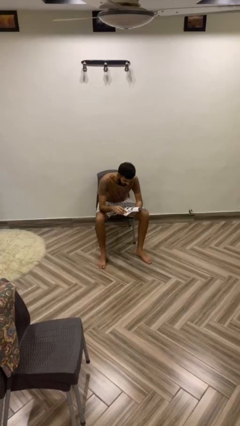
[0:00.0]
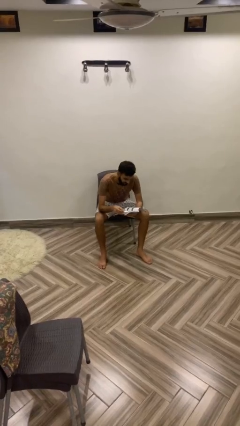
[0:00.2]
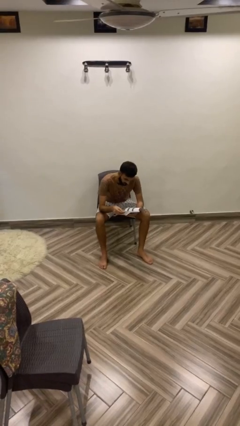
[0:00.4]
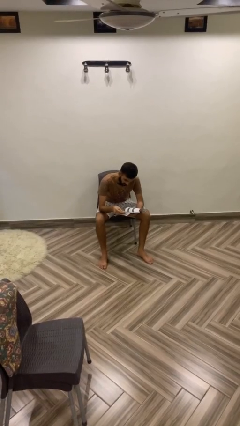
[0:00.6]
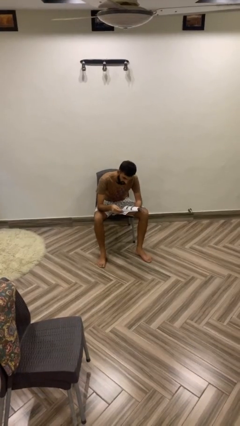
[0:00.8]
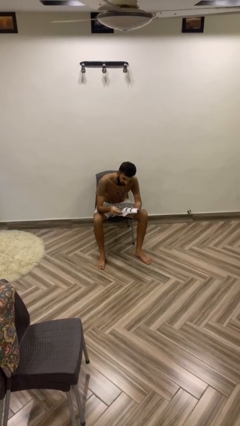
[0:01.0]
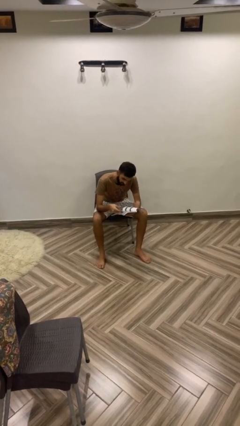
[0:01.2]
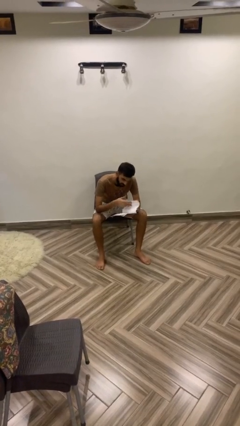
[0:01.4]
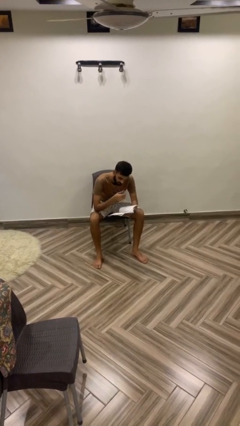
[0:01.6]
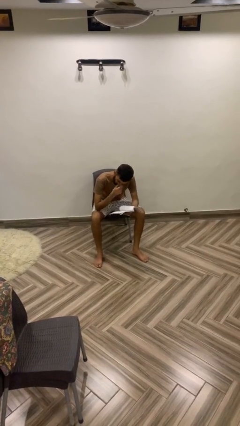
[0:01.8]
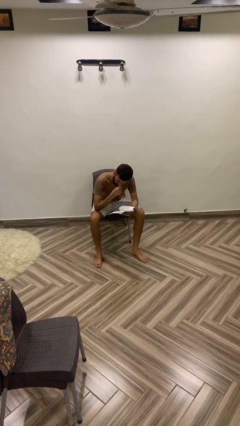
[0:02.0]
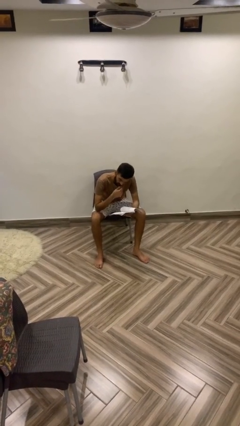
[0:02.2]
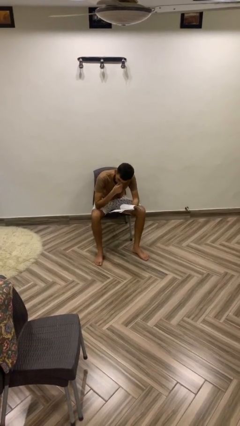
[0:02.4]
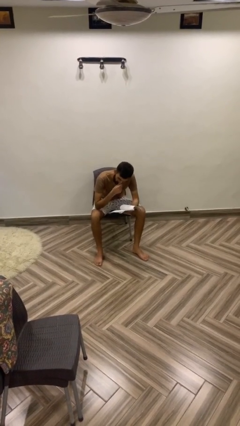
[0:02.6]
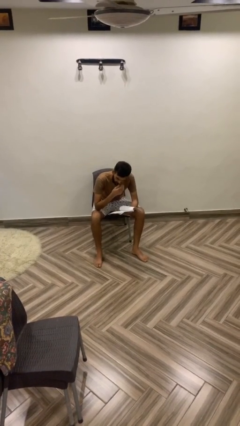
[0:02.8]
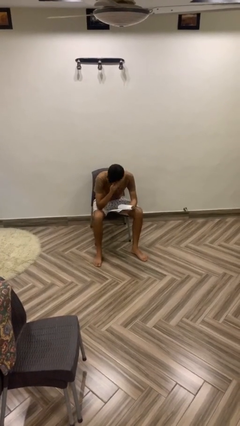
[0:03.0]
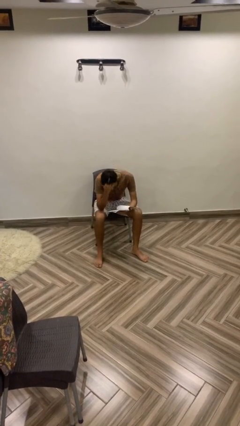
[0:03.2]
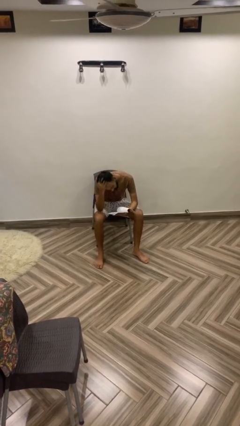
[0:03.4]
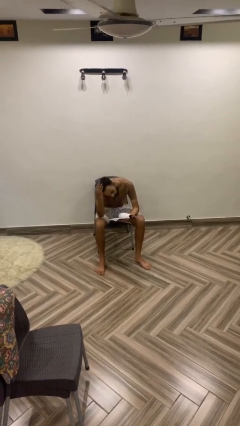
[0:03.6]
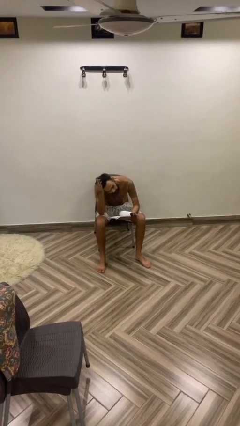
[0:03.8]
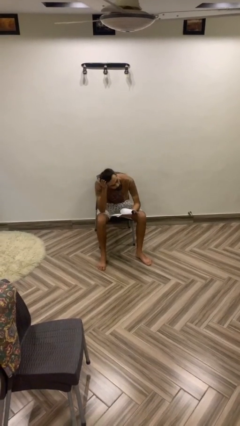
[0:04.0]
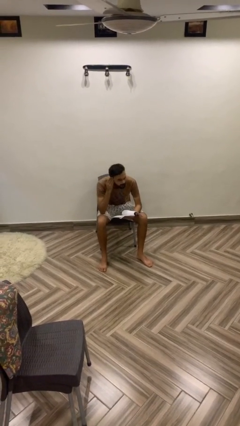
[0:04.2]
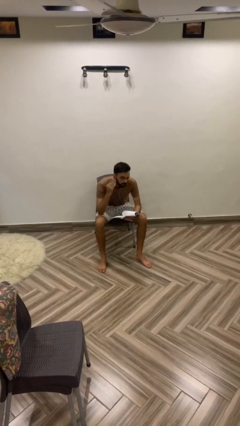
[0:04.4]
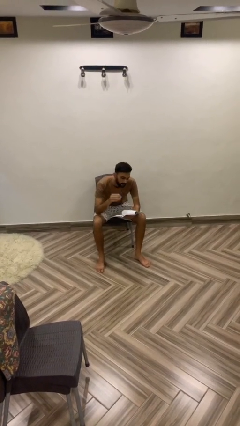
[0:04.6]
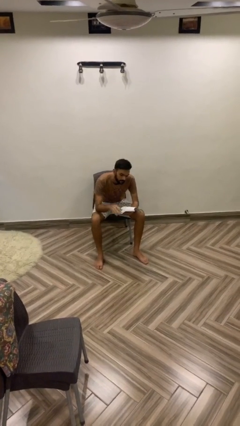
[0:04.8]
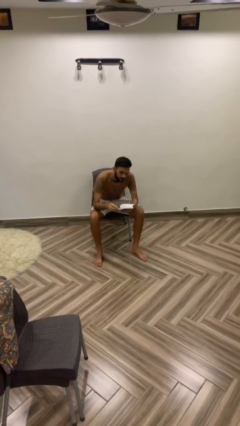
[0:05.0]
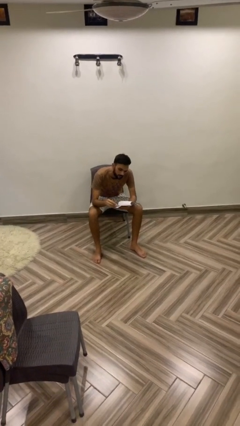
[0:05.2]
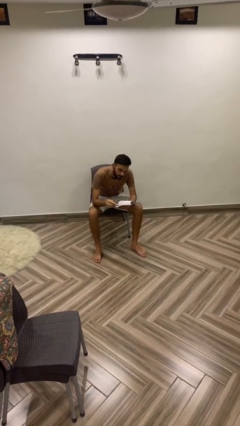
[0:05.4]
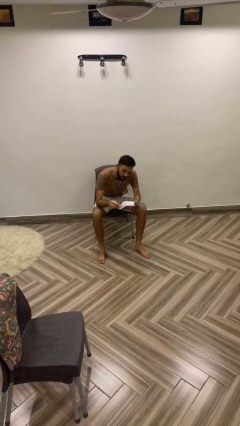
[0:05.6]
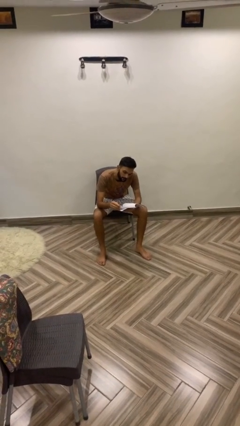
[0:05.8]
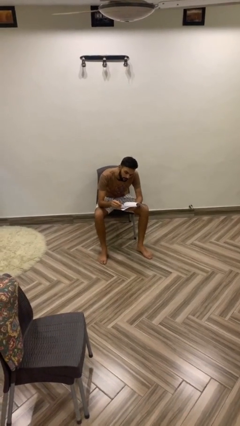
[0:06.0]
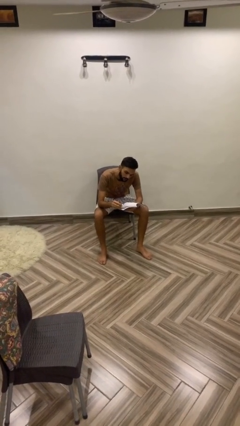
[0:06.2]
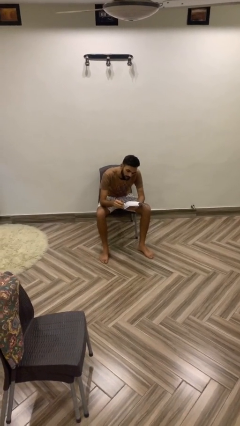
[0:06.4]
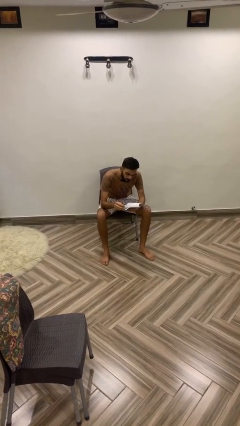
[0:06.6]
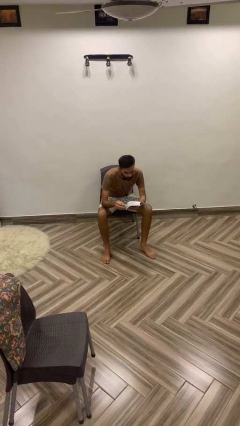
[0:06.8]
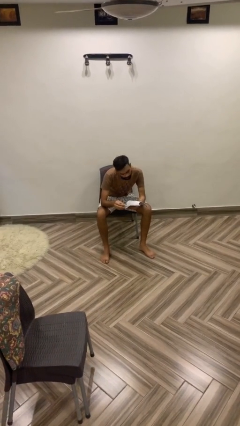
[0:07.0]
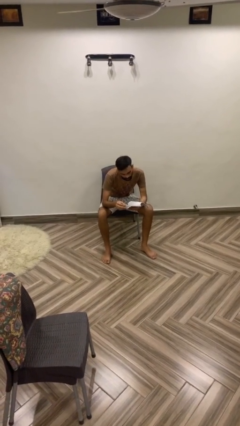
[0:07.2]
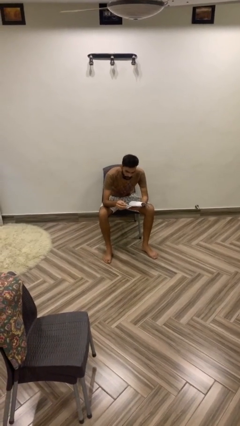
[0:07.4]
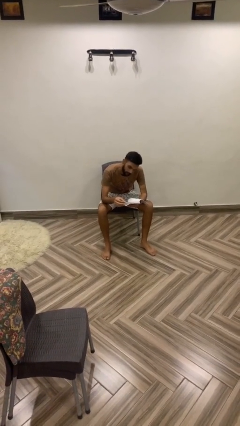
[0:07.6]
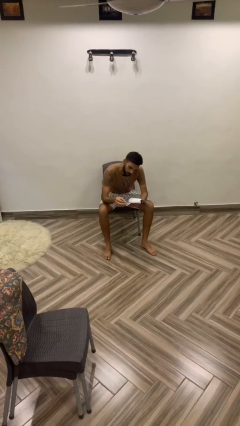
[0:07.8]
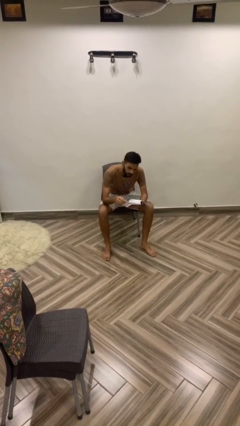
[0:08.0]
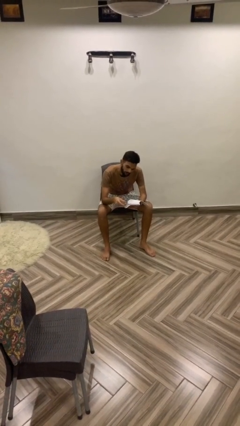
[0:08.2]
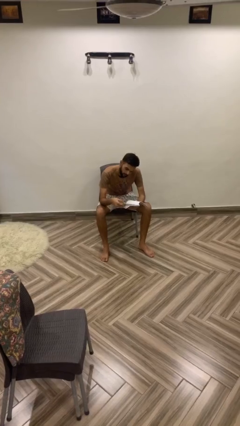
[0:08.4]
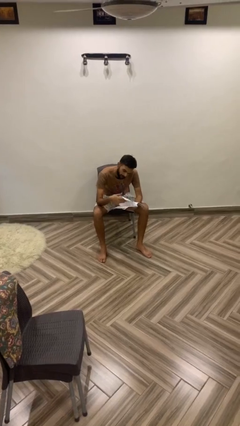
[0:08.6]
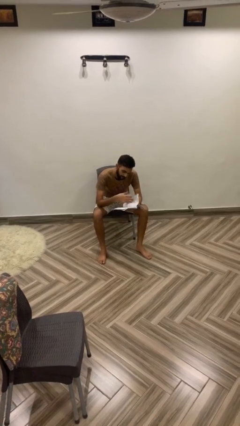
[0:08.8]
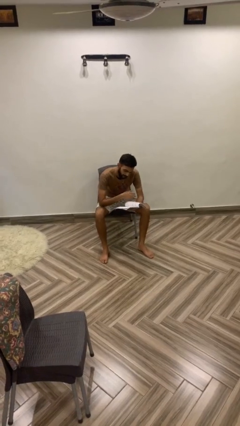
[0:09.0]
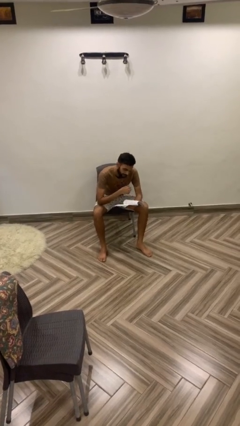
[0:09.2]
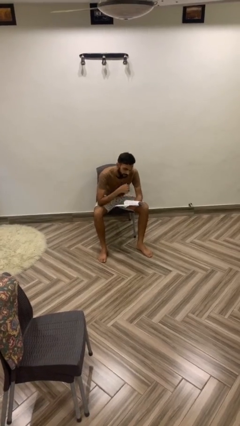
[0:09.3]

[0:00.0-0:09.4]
person reads document

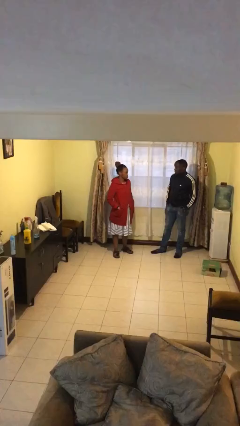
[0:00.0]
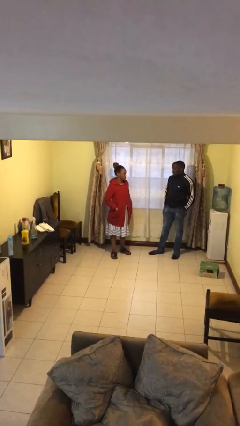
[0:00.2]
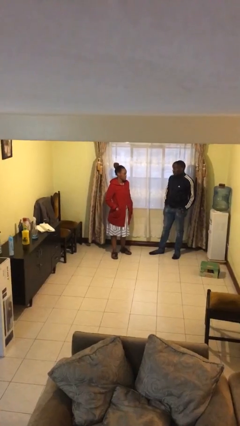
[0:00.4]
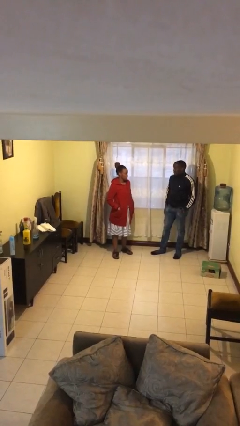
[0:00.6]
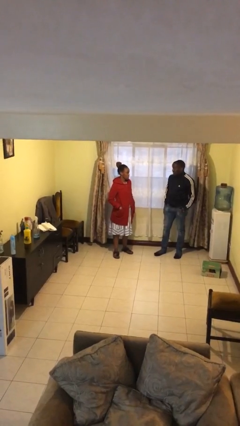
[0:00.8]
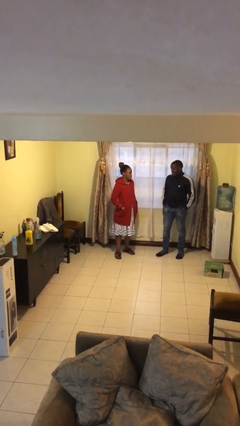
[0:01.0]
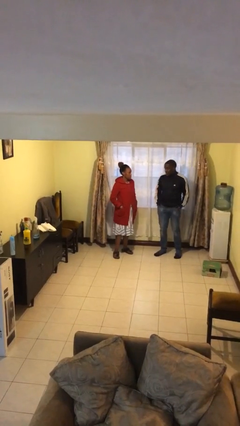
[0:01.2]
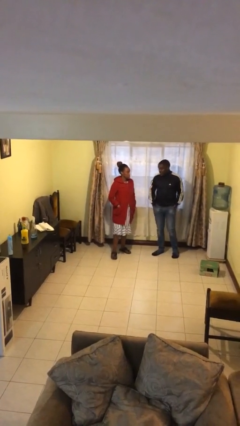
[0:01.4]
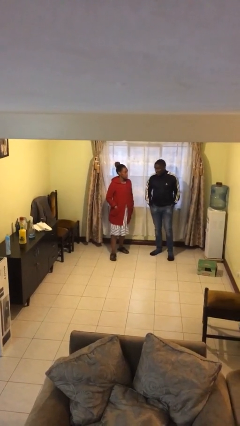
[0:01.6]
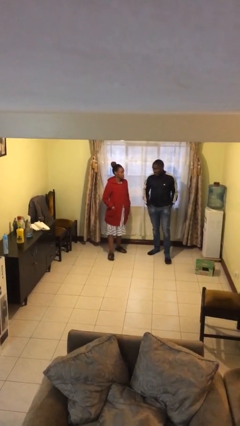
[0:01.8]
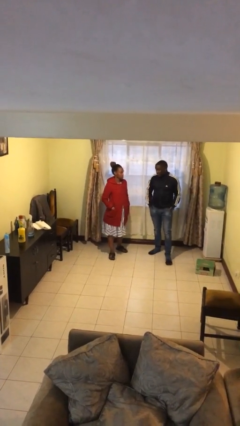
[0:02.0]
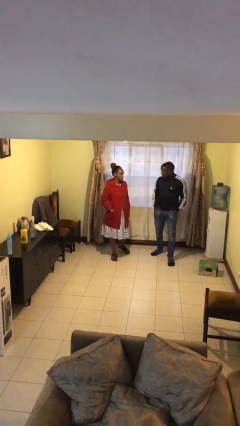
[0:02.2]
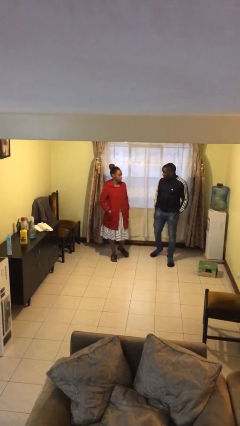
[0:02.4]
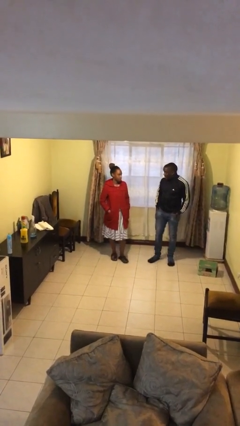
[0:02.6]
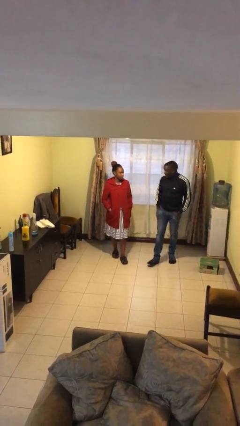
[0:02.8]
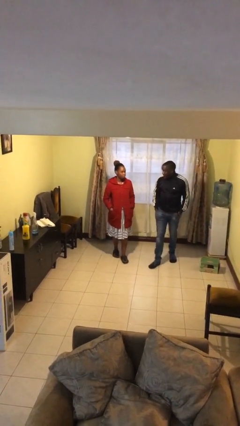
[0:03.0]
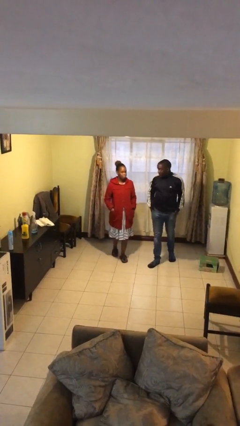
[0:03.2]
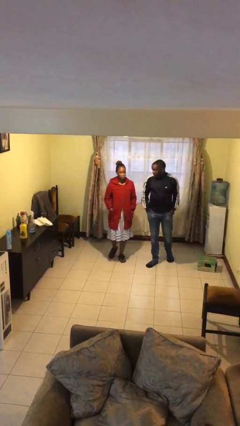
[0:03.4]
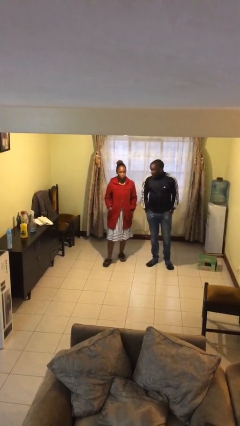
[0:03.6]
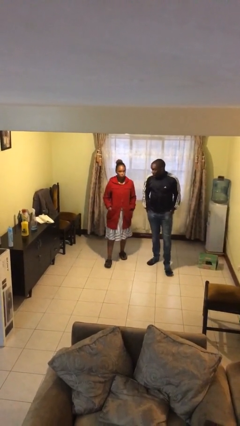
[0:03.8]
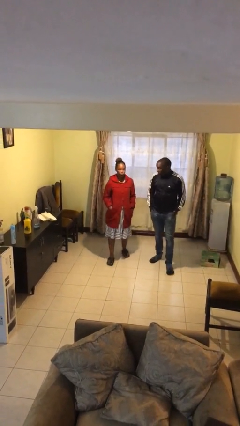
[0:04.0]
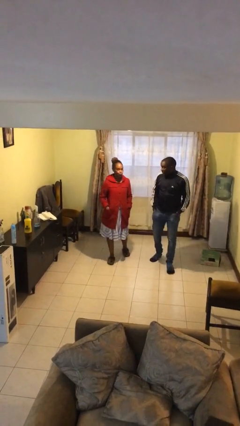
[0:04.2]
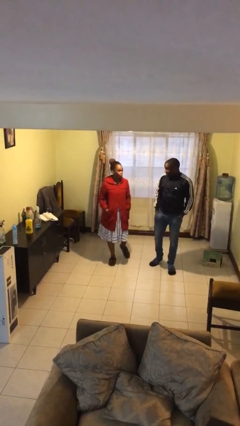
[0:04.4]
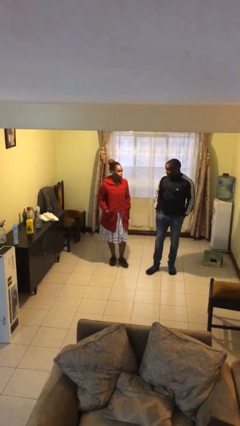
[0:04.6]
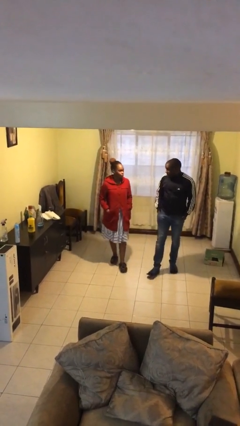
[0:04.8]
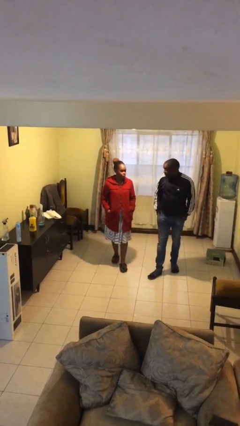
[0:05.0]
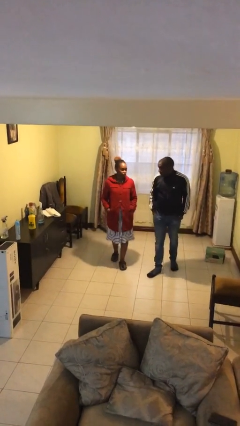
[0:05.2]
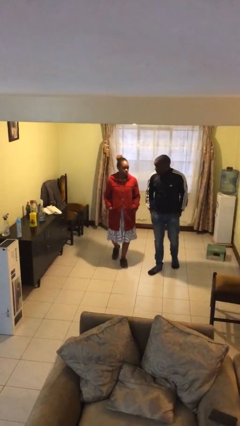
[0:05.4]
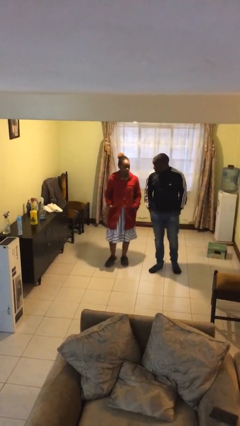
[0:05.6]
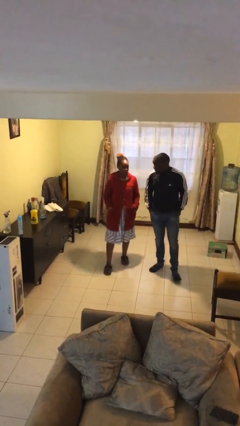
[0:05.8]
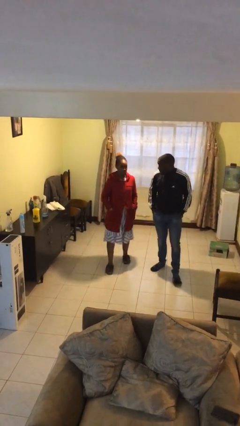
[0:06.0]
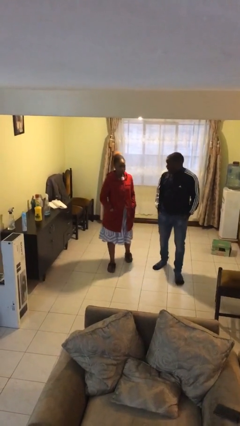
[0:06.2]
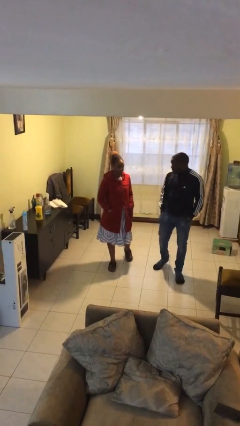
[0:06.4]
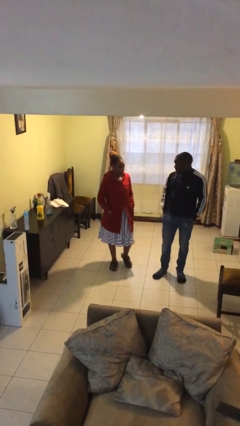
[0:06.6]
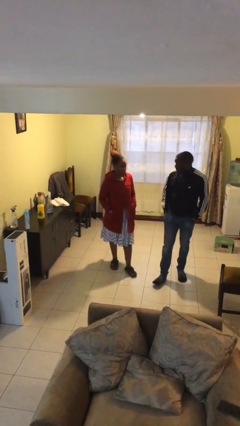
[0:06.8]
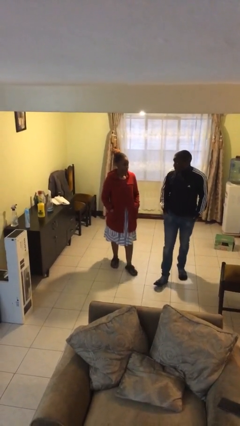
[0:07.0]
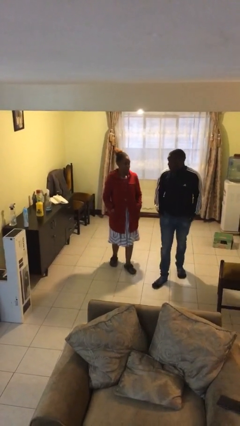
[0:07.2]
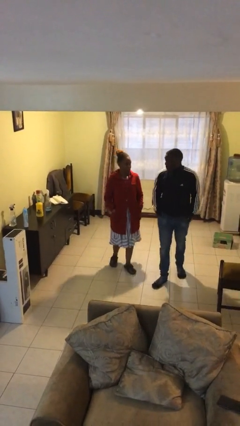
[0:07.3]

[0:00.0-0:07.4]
person talks to person

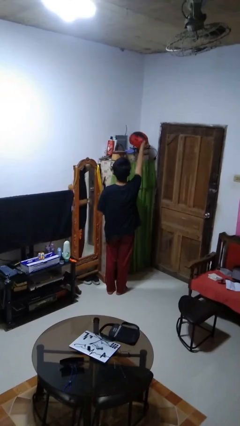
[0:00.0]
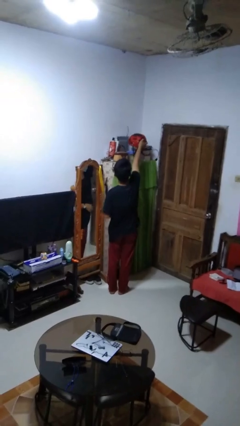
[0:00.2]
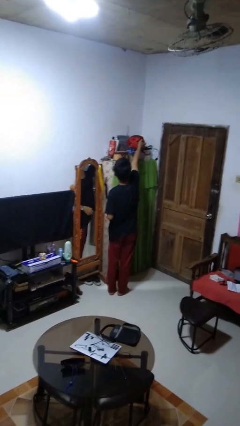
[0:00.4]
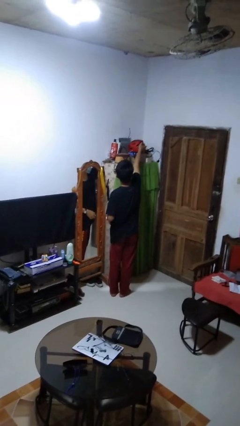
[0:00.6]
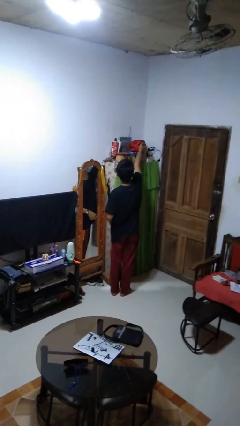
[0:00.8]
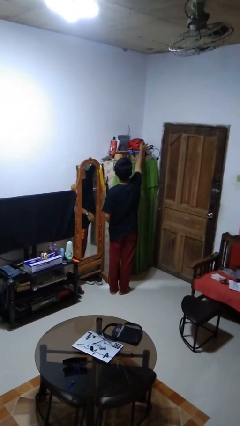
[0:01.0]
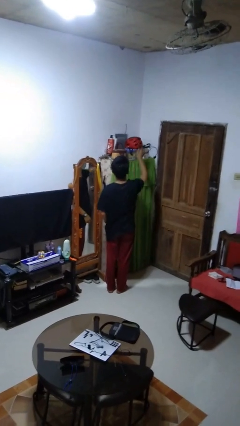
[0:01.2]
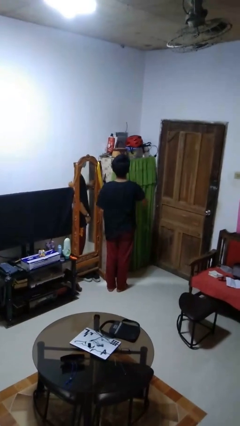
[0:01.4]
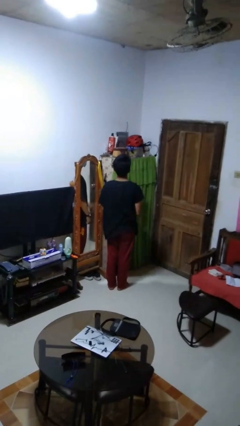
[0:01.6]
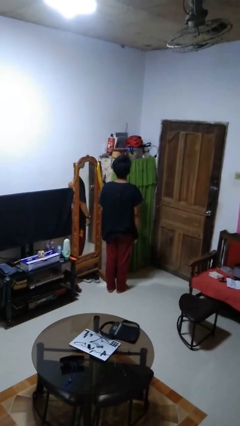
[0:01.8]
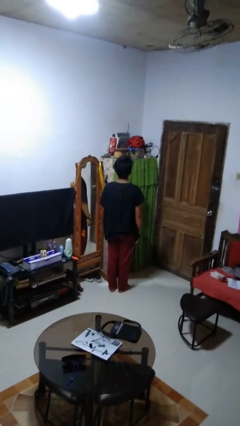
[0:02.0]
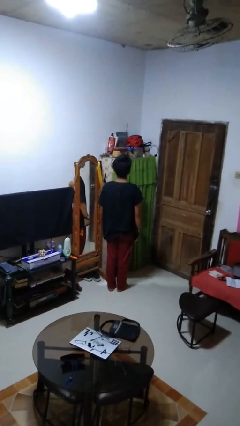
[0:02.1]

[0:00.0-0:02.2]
person puts down object on shelf
